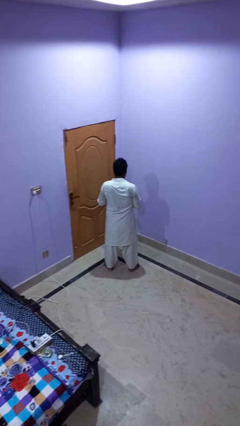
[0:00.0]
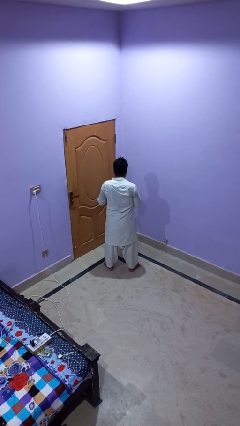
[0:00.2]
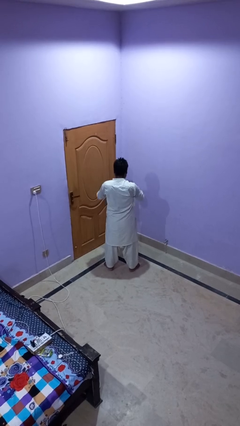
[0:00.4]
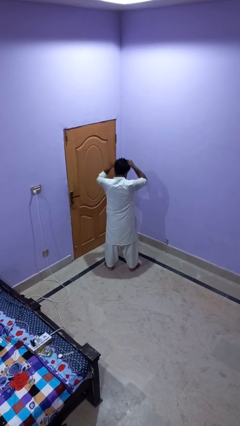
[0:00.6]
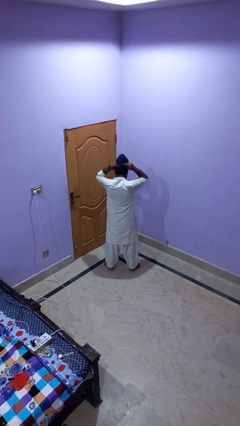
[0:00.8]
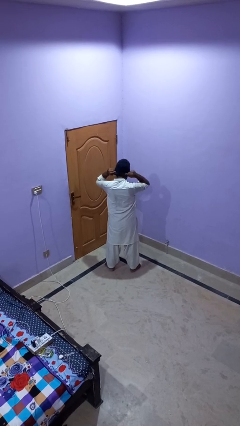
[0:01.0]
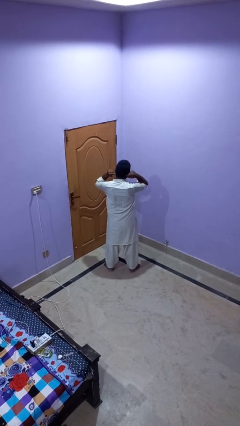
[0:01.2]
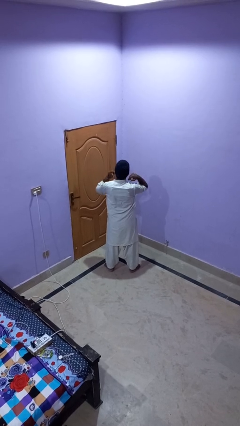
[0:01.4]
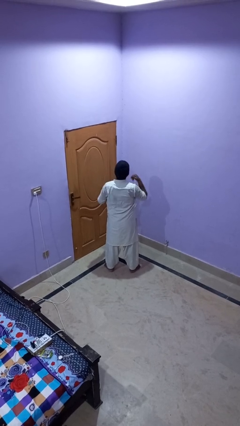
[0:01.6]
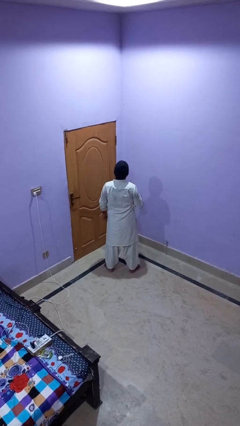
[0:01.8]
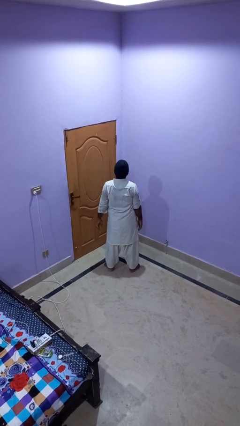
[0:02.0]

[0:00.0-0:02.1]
person puts on hat

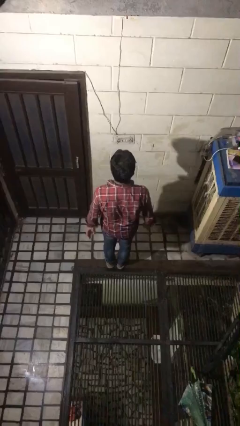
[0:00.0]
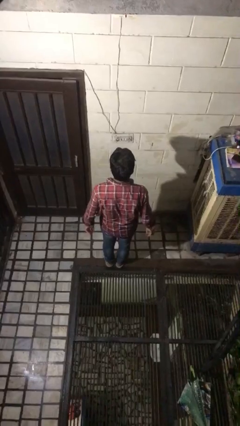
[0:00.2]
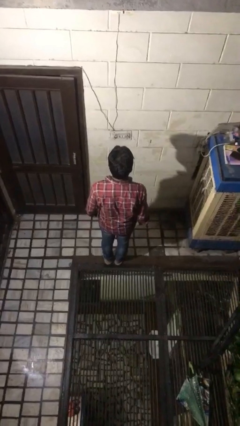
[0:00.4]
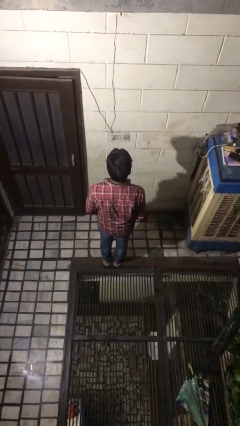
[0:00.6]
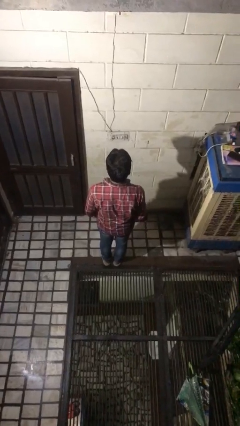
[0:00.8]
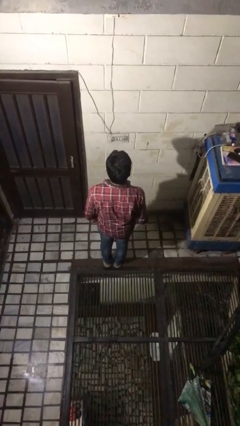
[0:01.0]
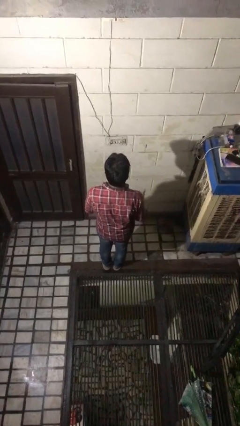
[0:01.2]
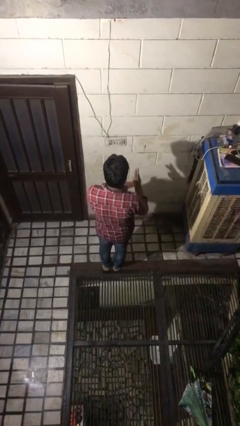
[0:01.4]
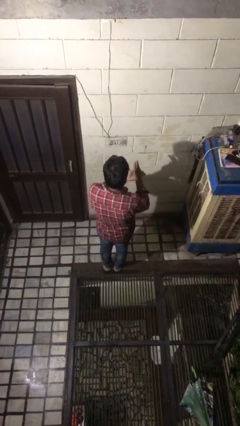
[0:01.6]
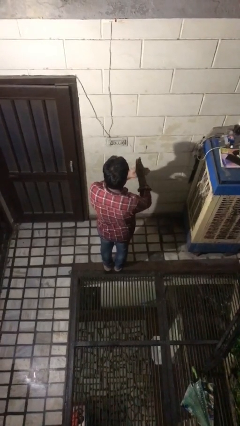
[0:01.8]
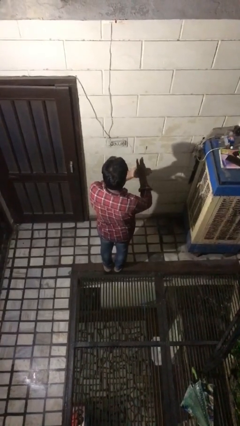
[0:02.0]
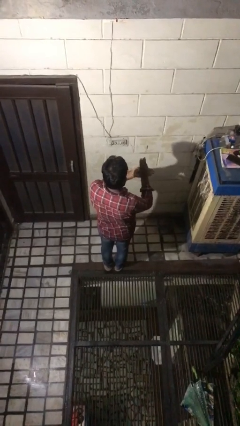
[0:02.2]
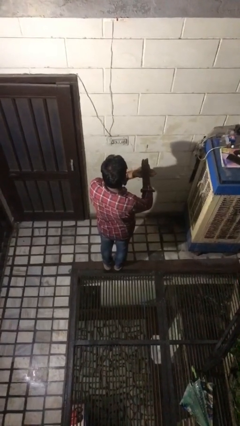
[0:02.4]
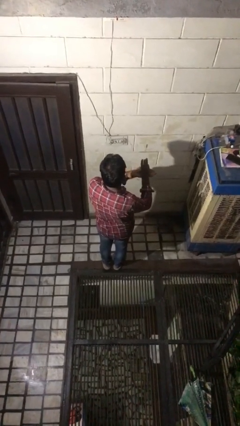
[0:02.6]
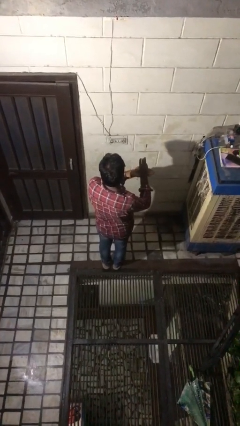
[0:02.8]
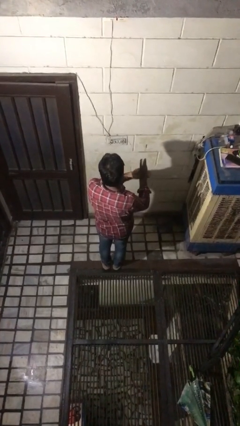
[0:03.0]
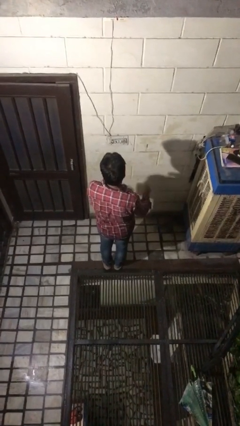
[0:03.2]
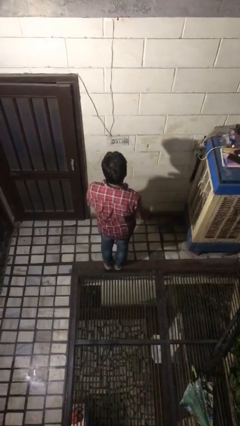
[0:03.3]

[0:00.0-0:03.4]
person gestures number three

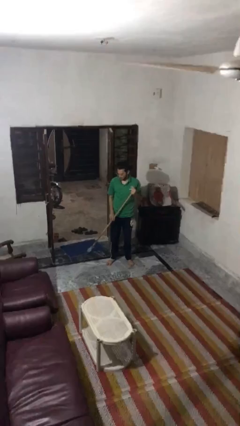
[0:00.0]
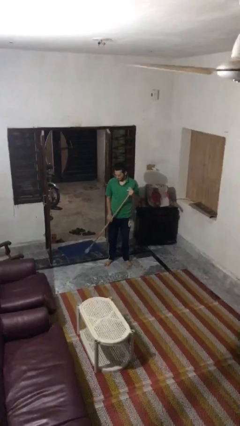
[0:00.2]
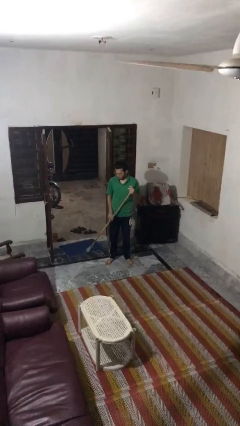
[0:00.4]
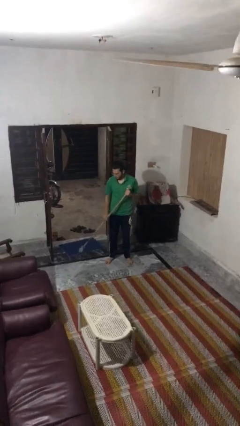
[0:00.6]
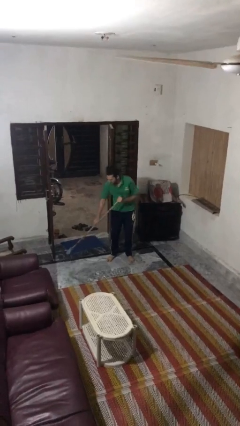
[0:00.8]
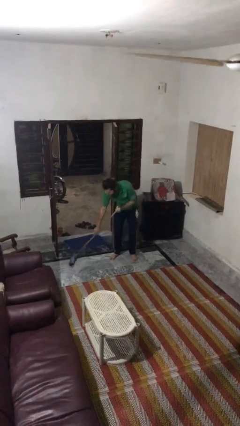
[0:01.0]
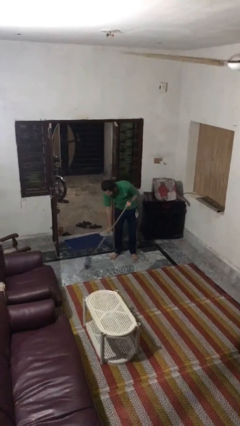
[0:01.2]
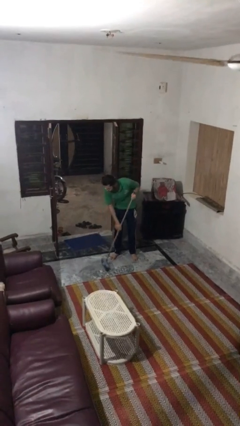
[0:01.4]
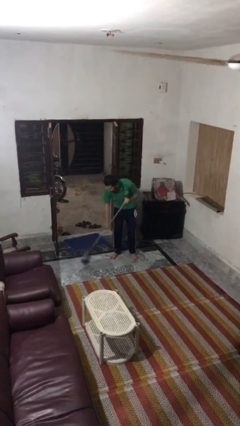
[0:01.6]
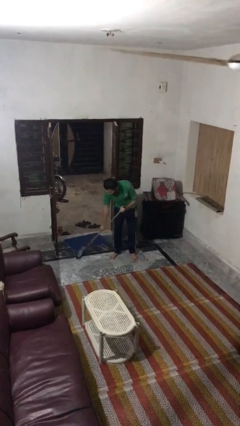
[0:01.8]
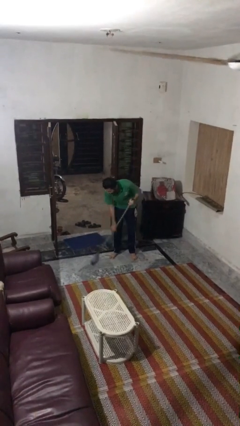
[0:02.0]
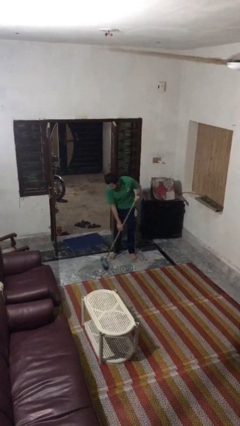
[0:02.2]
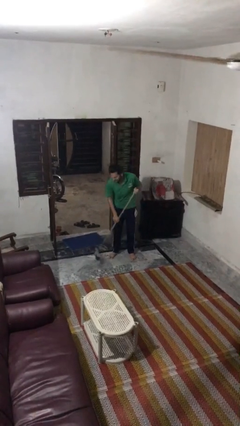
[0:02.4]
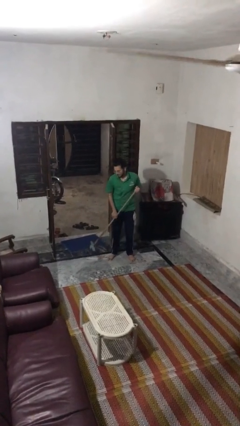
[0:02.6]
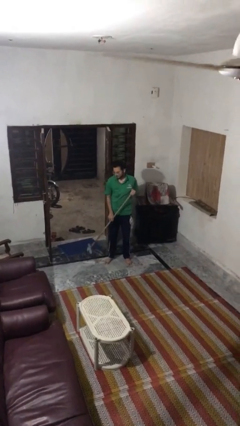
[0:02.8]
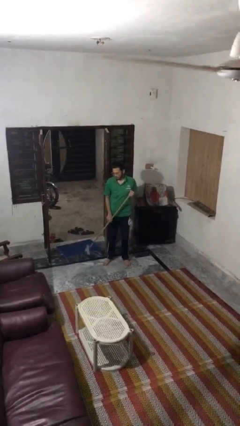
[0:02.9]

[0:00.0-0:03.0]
person sweeps floor

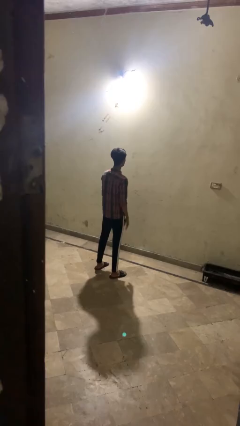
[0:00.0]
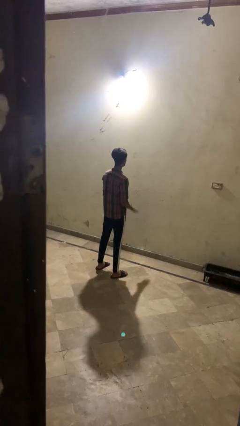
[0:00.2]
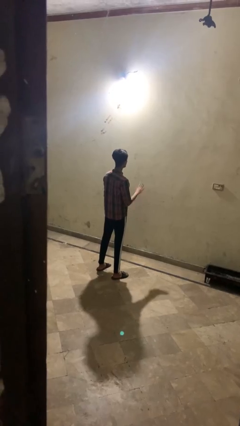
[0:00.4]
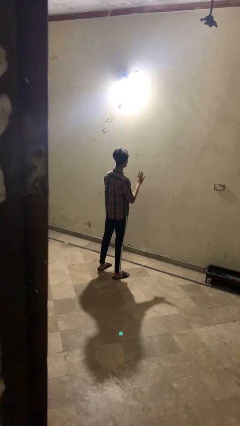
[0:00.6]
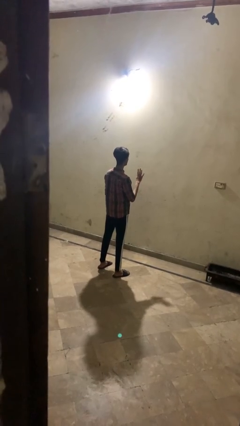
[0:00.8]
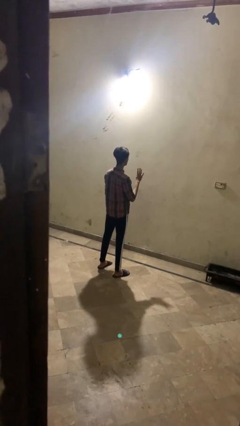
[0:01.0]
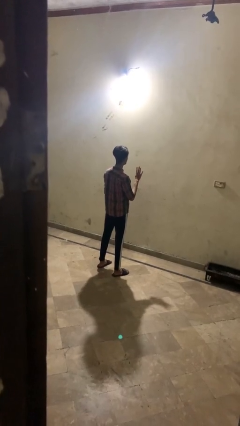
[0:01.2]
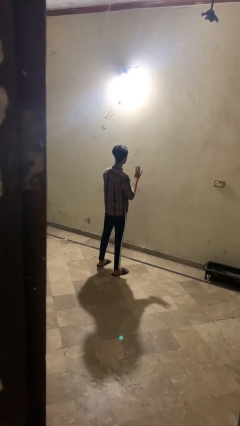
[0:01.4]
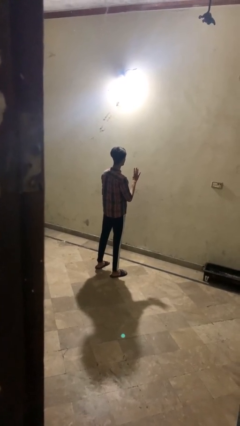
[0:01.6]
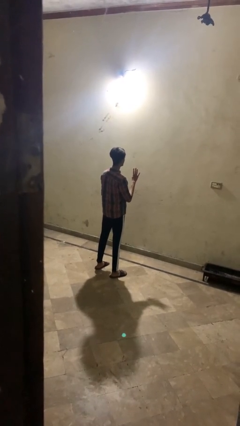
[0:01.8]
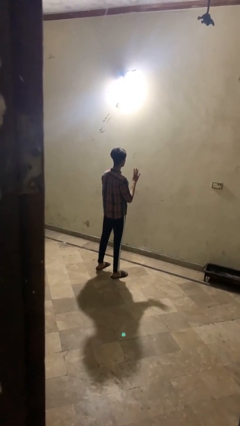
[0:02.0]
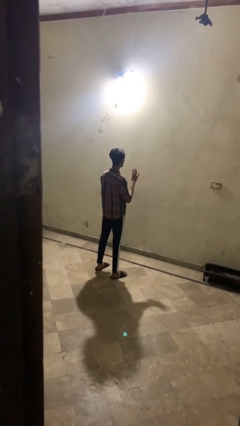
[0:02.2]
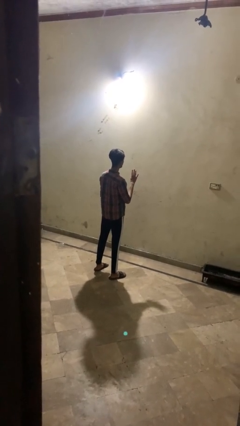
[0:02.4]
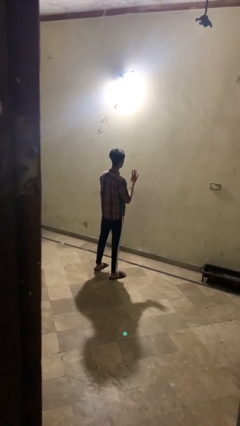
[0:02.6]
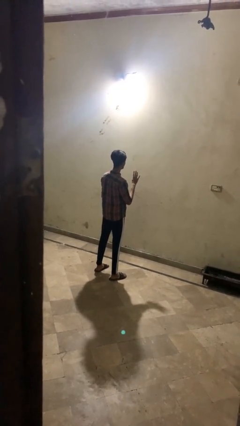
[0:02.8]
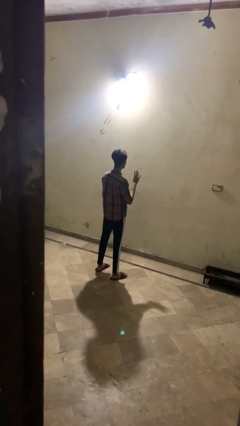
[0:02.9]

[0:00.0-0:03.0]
person gestures number four

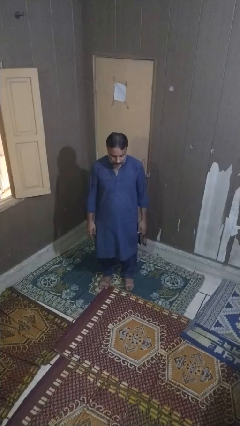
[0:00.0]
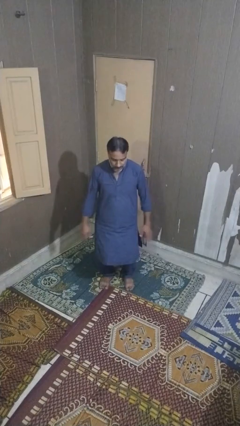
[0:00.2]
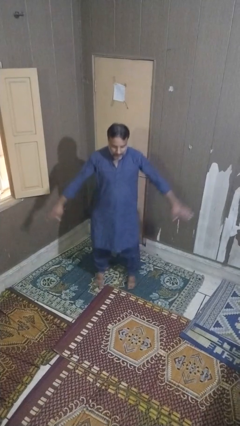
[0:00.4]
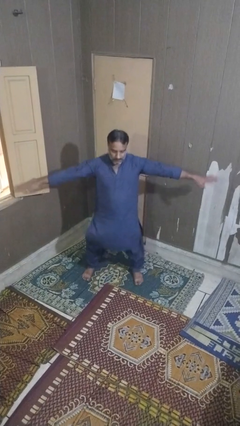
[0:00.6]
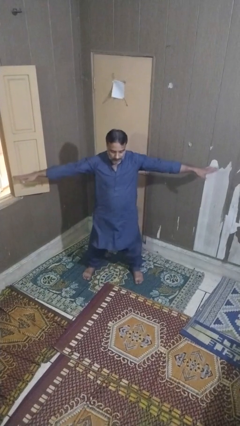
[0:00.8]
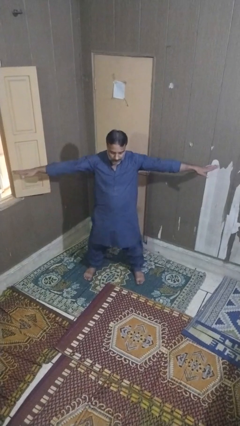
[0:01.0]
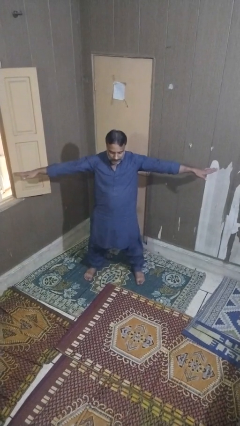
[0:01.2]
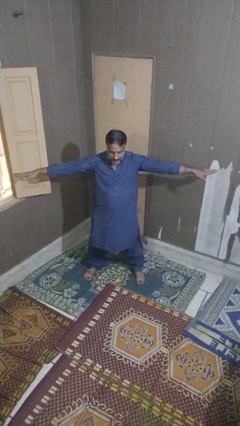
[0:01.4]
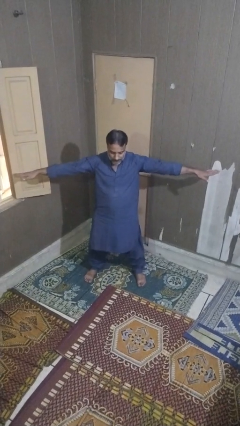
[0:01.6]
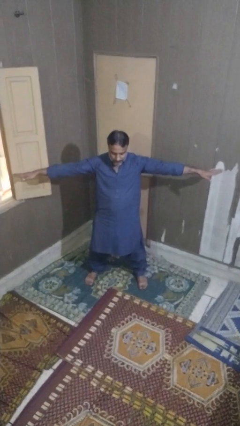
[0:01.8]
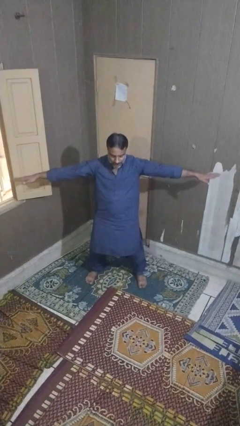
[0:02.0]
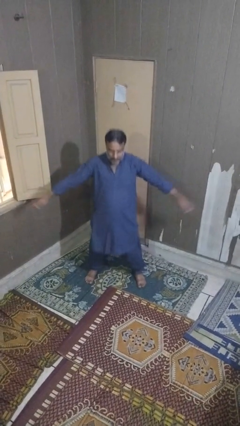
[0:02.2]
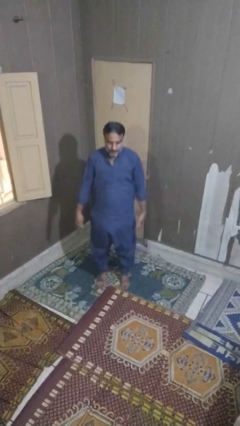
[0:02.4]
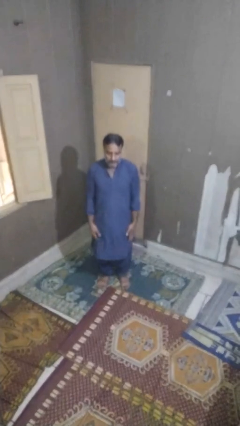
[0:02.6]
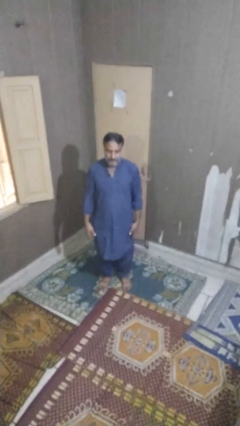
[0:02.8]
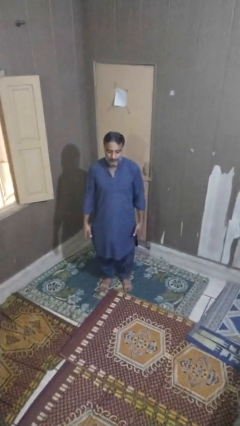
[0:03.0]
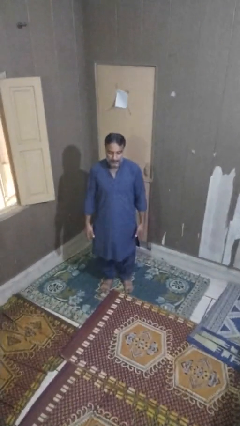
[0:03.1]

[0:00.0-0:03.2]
person exercises with jumping jacks

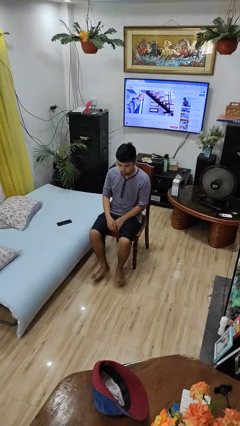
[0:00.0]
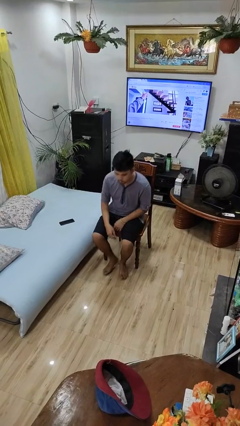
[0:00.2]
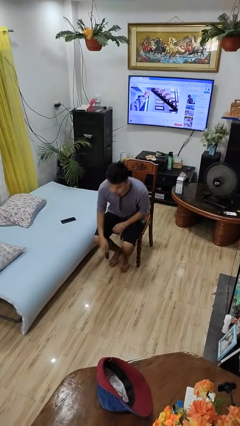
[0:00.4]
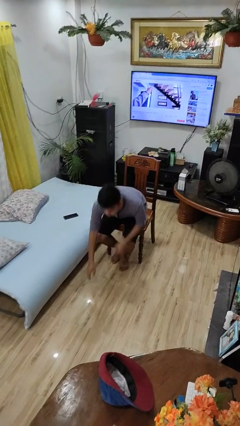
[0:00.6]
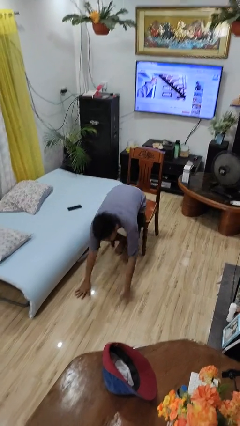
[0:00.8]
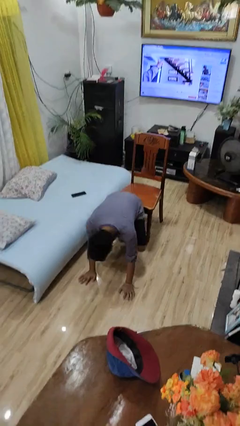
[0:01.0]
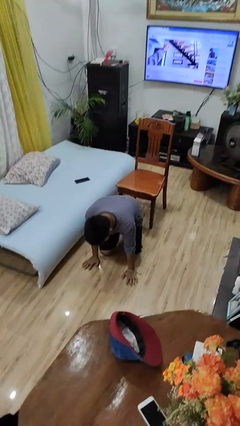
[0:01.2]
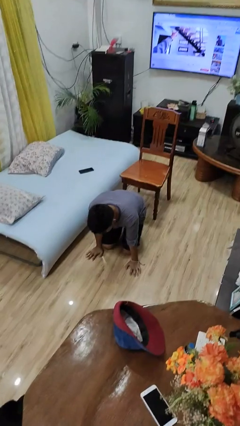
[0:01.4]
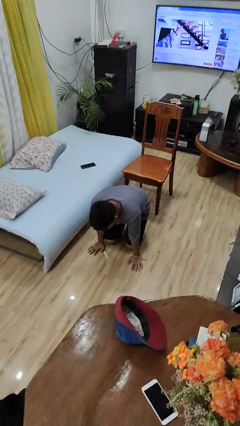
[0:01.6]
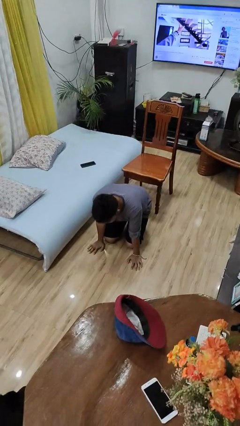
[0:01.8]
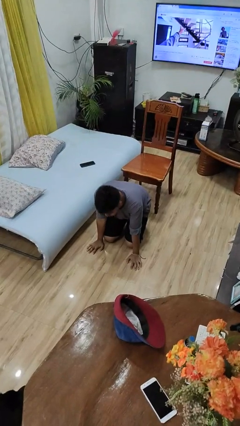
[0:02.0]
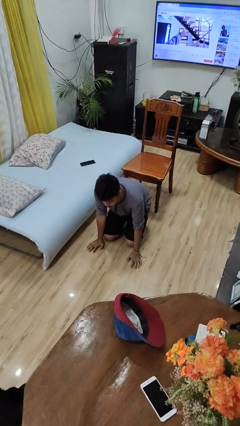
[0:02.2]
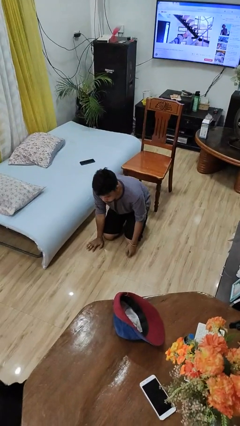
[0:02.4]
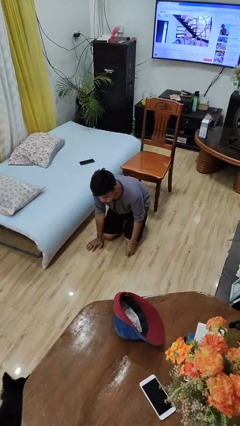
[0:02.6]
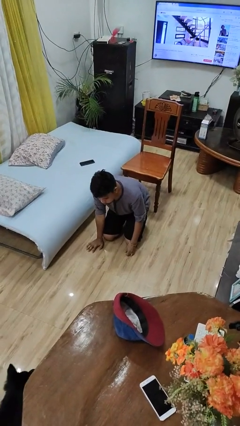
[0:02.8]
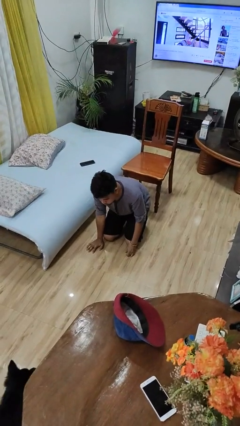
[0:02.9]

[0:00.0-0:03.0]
person falls from chair
